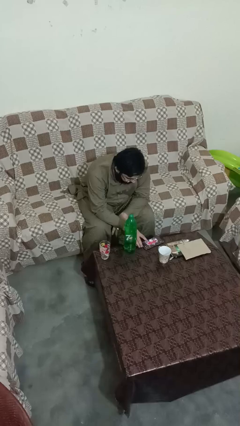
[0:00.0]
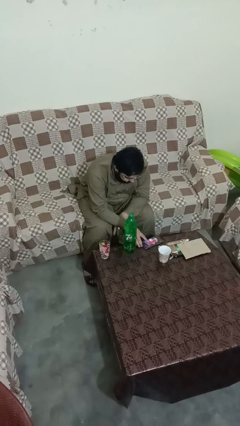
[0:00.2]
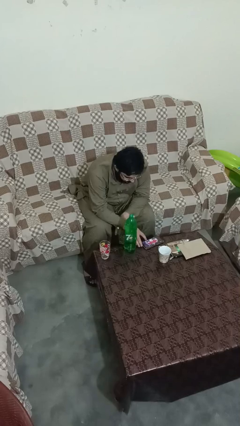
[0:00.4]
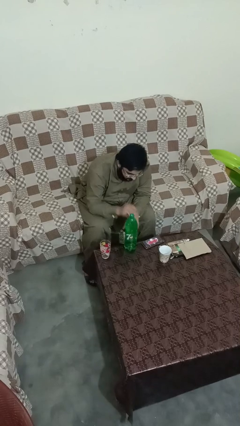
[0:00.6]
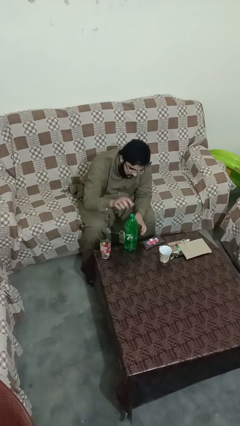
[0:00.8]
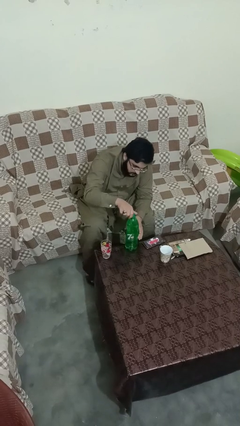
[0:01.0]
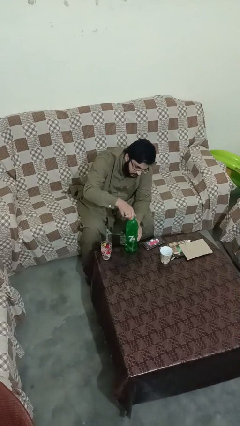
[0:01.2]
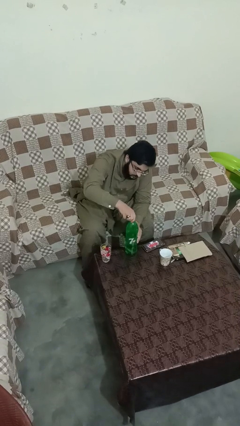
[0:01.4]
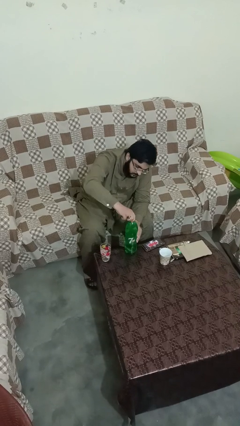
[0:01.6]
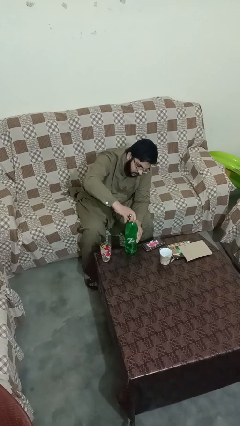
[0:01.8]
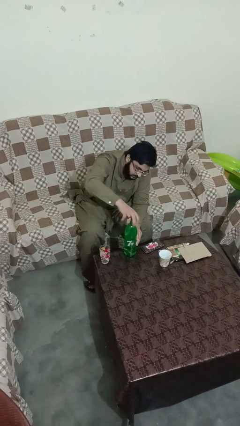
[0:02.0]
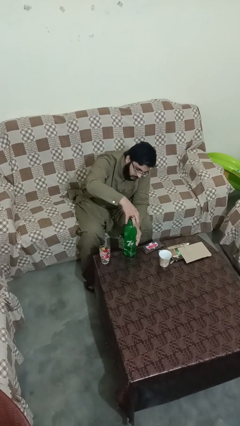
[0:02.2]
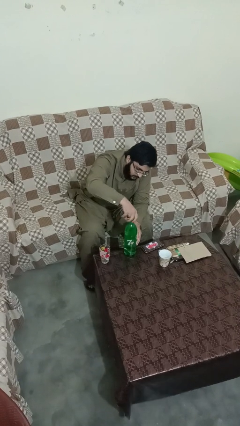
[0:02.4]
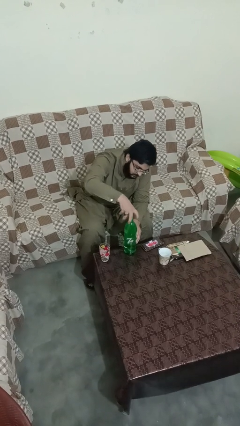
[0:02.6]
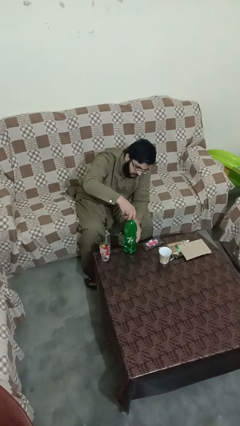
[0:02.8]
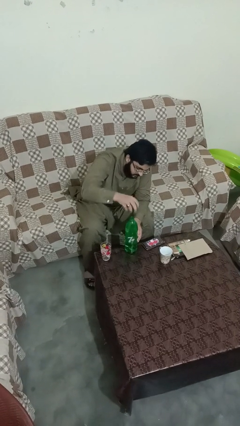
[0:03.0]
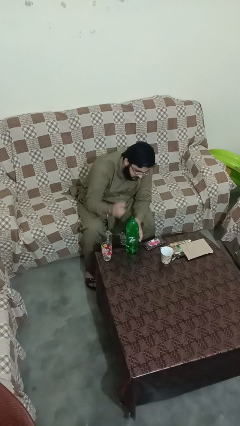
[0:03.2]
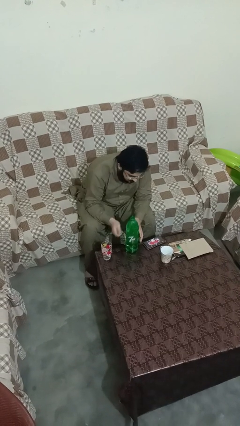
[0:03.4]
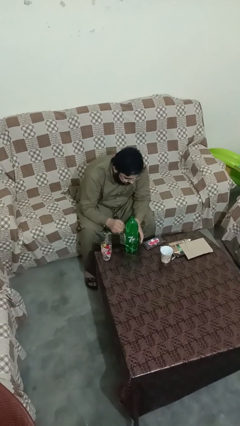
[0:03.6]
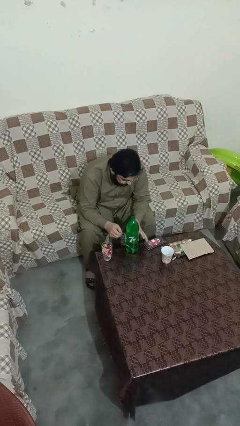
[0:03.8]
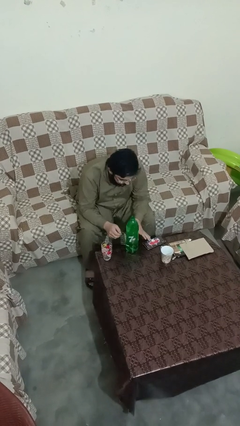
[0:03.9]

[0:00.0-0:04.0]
person unscrews lid from bottle

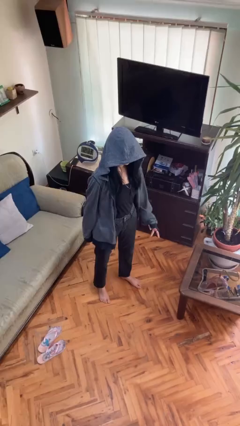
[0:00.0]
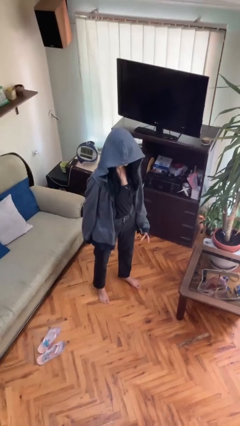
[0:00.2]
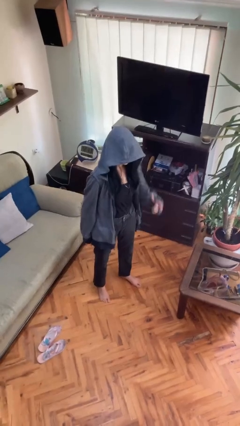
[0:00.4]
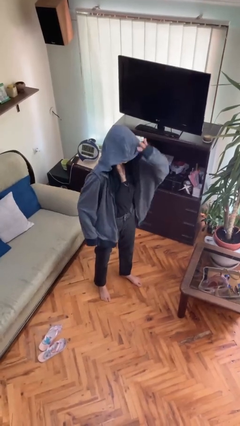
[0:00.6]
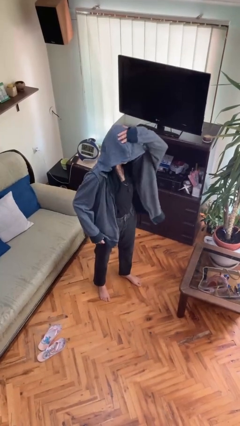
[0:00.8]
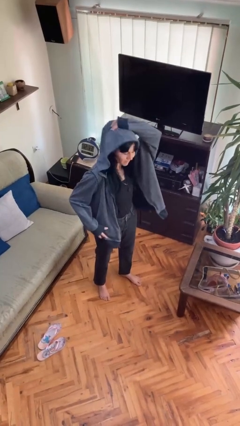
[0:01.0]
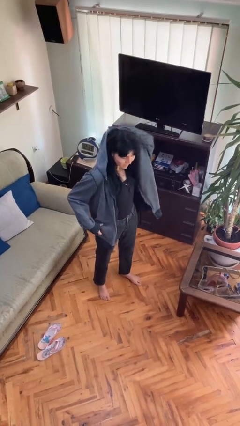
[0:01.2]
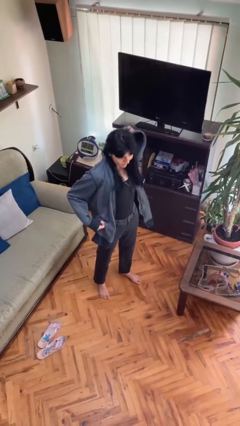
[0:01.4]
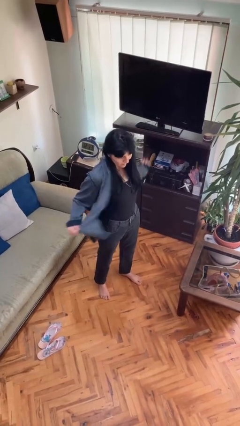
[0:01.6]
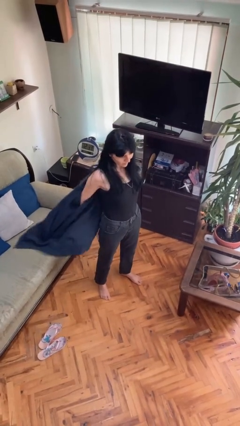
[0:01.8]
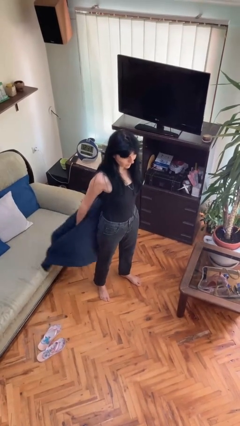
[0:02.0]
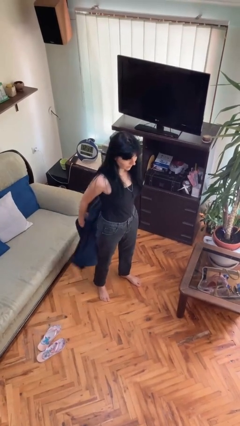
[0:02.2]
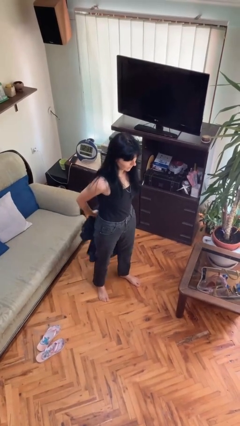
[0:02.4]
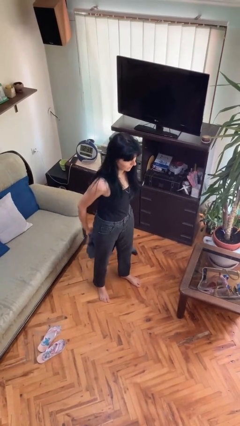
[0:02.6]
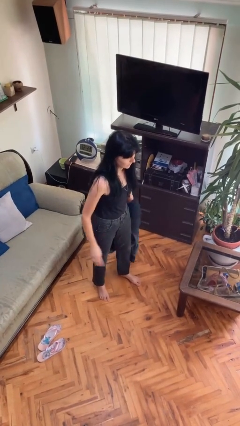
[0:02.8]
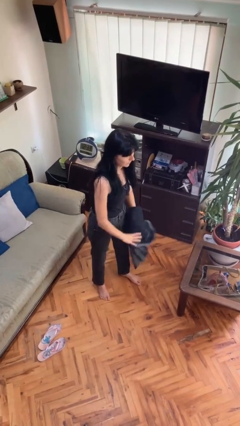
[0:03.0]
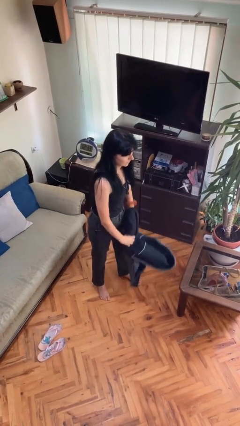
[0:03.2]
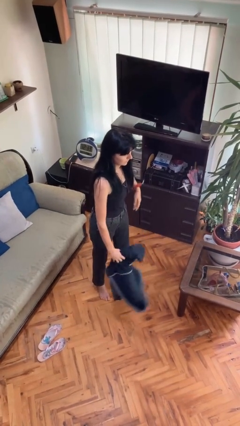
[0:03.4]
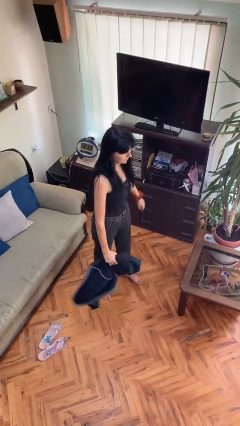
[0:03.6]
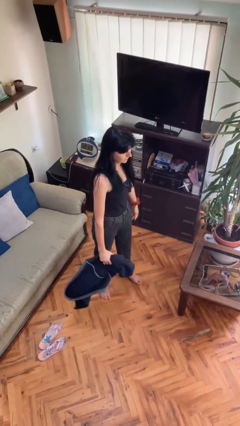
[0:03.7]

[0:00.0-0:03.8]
person takes off hoodie

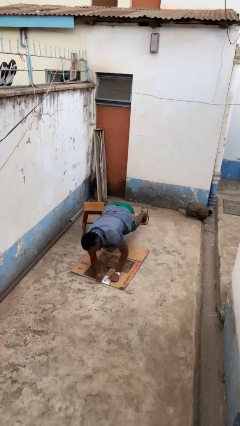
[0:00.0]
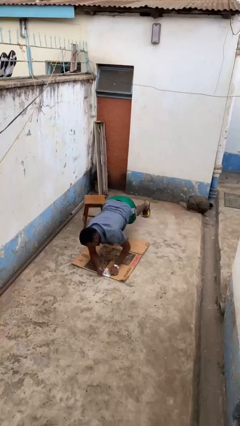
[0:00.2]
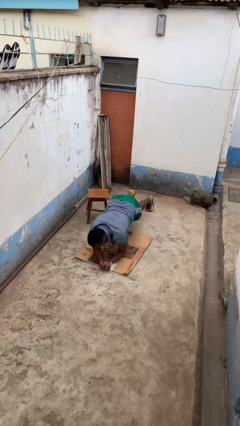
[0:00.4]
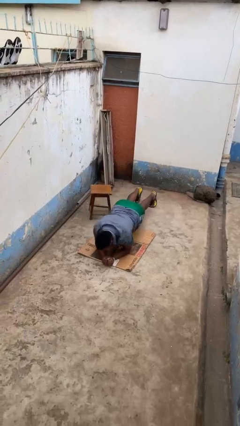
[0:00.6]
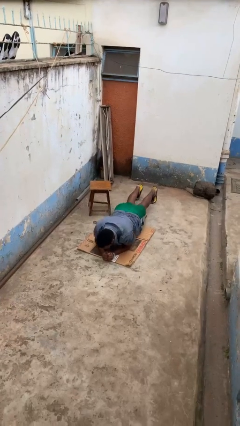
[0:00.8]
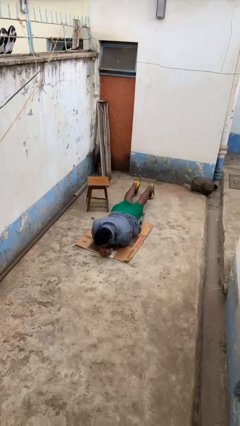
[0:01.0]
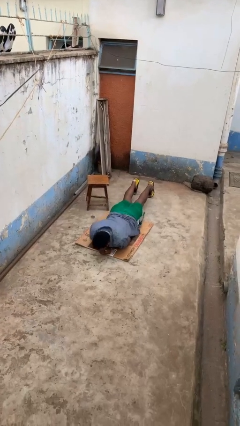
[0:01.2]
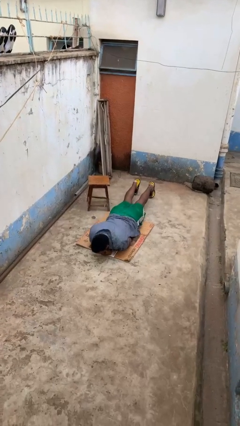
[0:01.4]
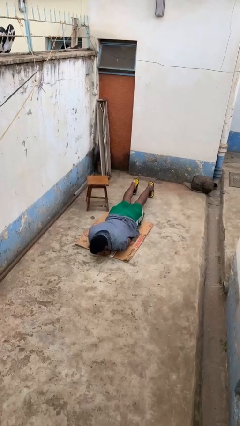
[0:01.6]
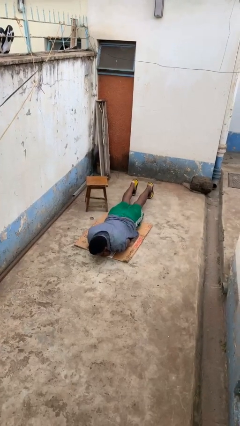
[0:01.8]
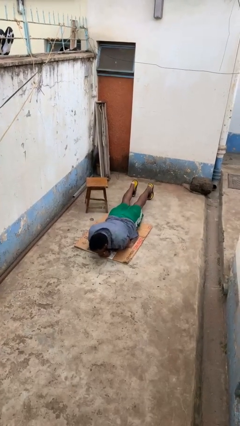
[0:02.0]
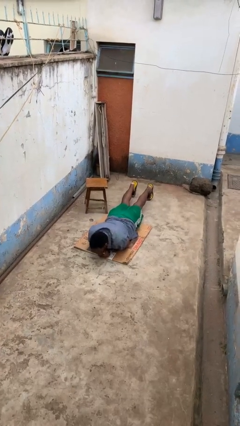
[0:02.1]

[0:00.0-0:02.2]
person lies down on floor

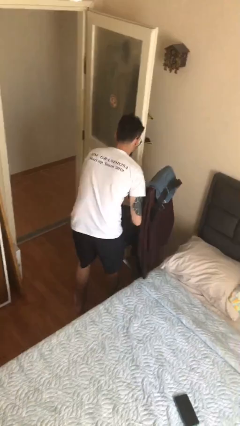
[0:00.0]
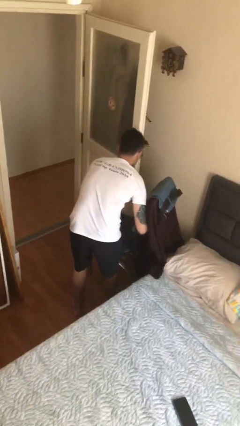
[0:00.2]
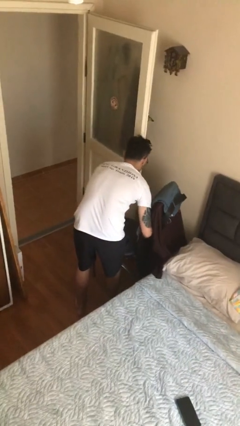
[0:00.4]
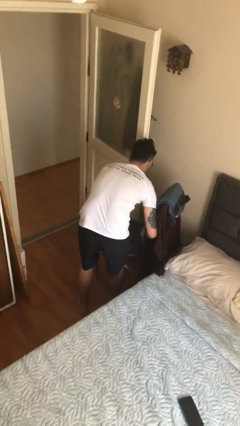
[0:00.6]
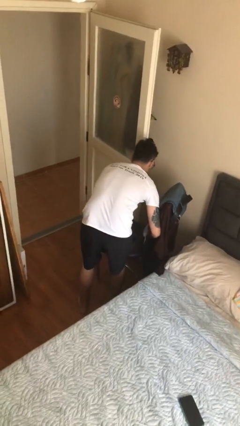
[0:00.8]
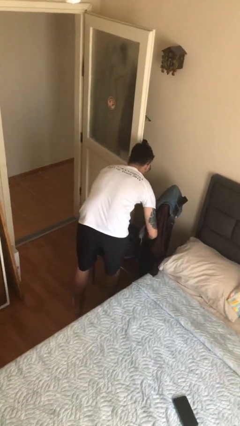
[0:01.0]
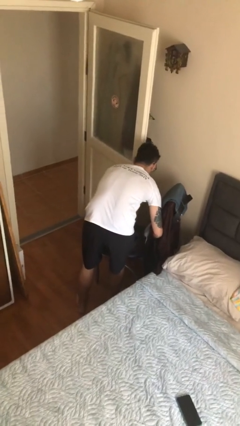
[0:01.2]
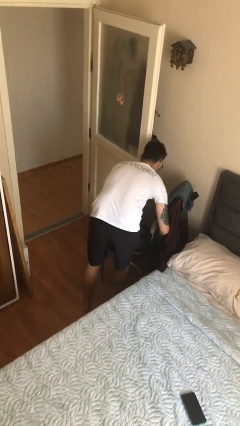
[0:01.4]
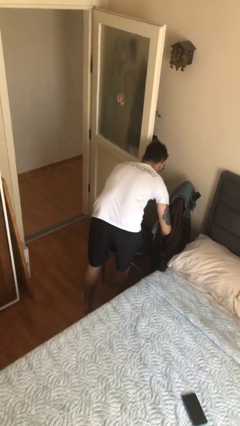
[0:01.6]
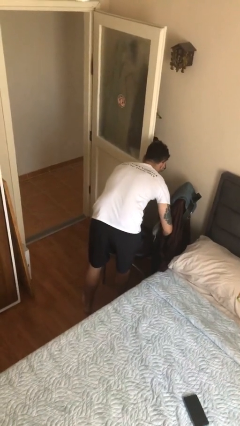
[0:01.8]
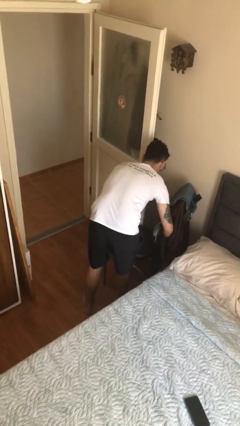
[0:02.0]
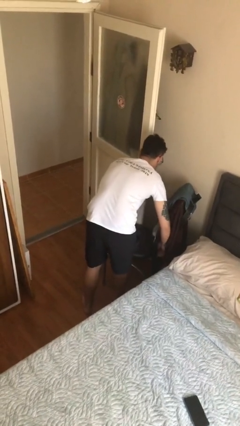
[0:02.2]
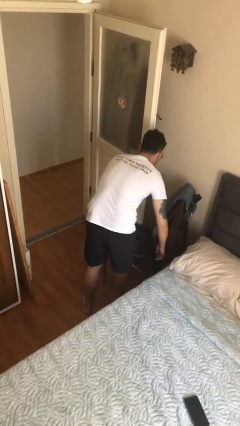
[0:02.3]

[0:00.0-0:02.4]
person puts down object on floor

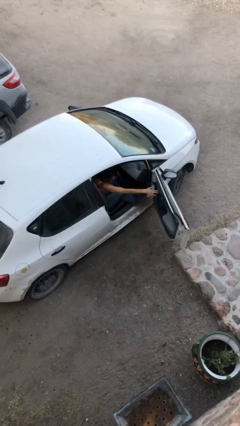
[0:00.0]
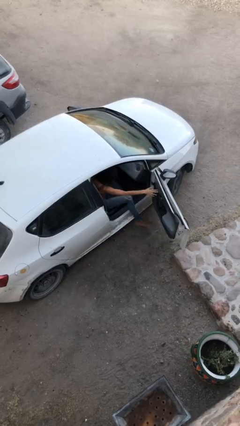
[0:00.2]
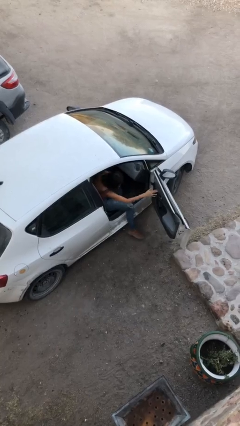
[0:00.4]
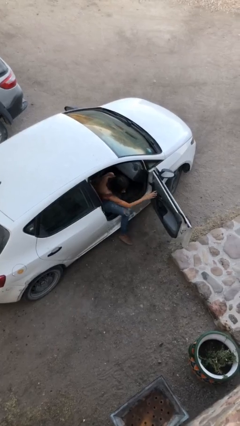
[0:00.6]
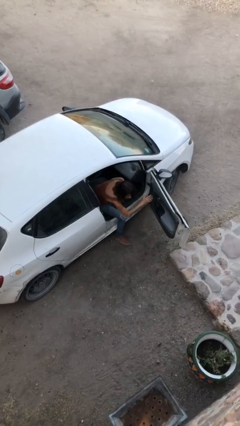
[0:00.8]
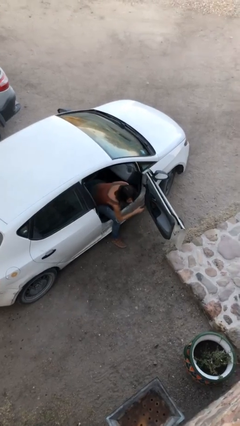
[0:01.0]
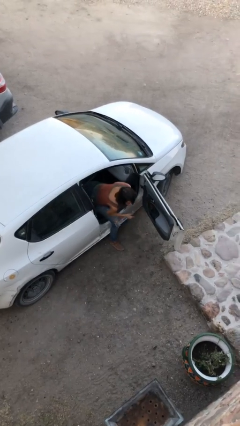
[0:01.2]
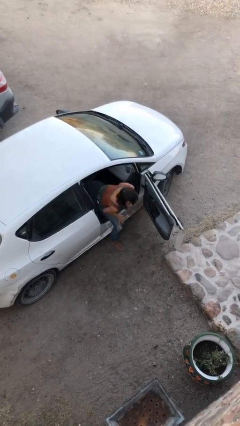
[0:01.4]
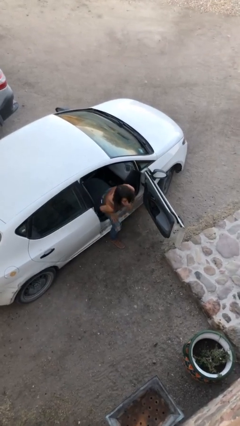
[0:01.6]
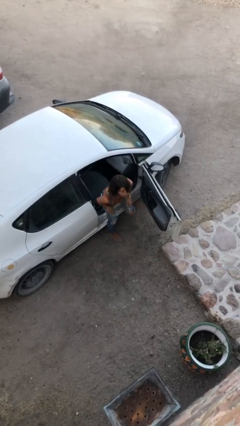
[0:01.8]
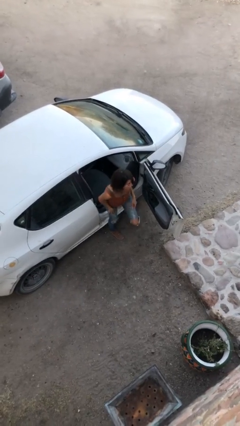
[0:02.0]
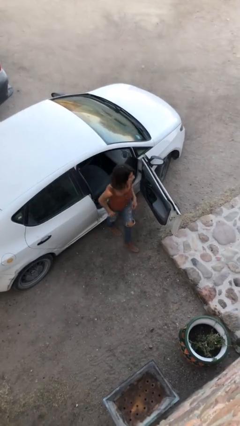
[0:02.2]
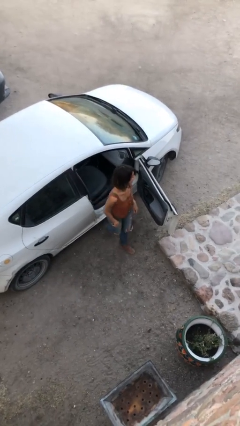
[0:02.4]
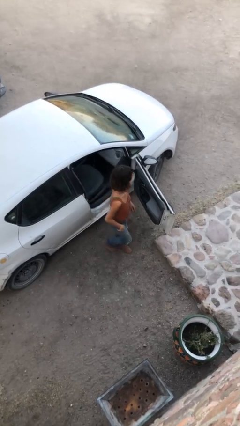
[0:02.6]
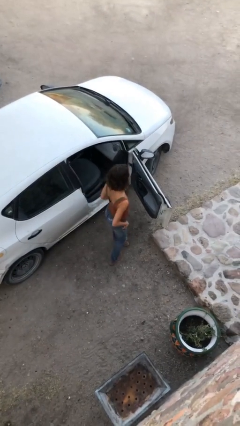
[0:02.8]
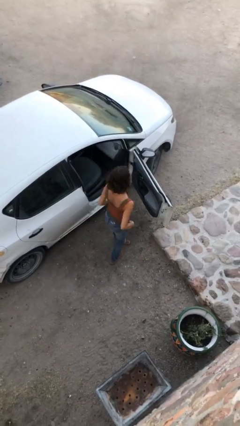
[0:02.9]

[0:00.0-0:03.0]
person exits car

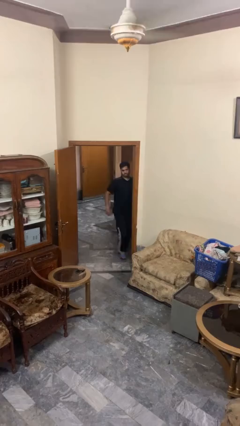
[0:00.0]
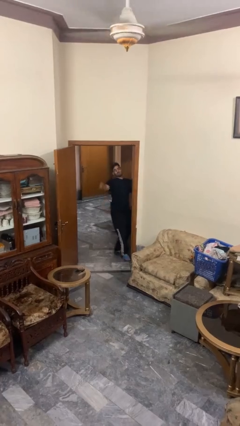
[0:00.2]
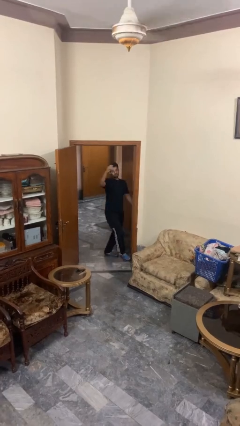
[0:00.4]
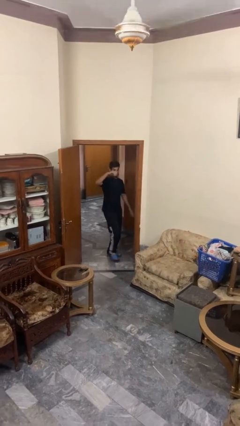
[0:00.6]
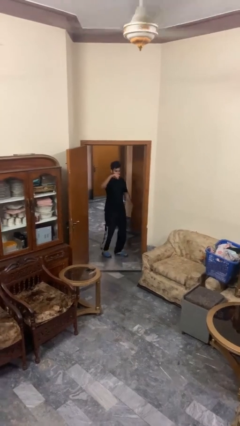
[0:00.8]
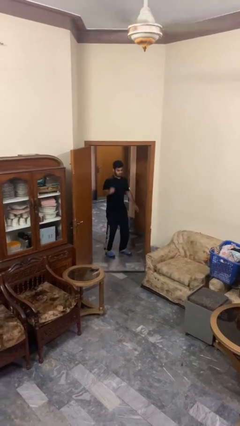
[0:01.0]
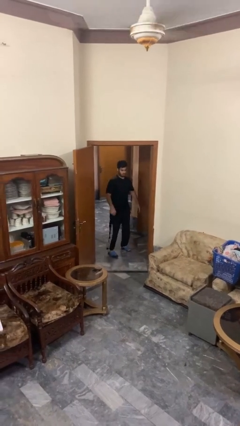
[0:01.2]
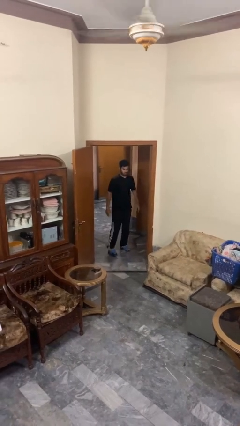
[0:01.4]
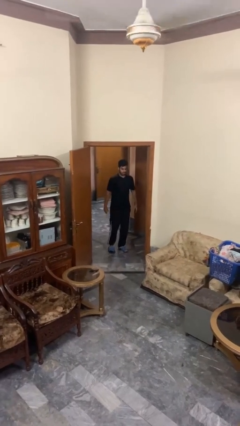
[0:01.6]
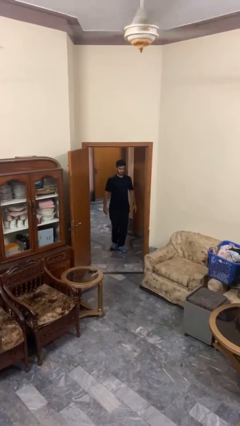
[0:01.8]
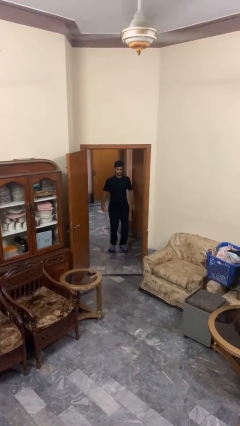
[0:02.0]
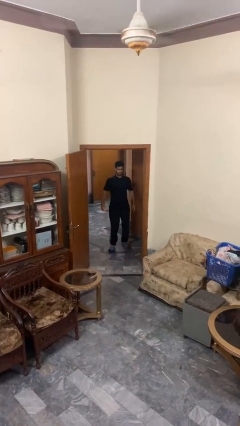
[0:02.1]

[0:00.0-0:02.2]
person bumps into wall
